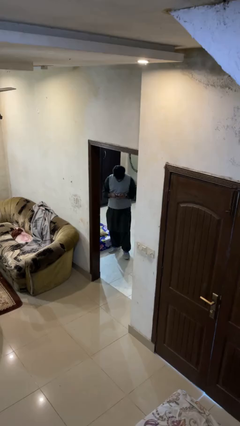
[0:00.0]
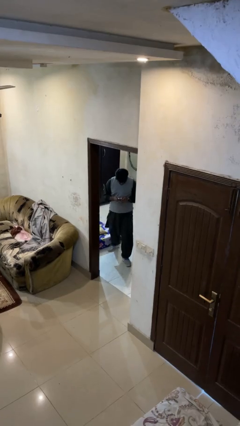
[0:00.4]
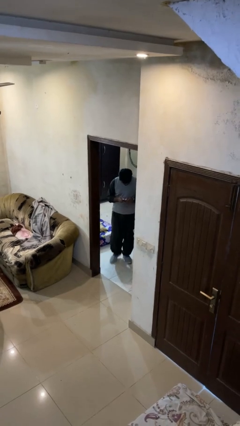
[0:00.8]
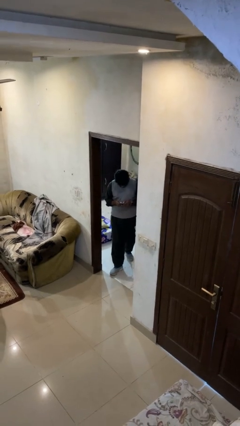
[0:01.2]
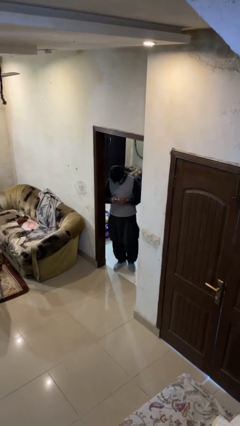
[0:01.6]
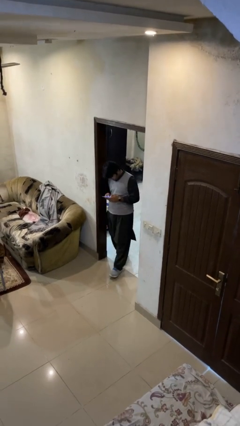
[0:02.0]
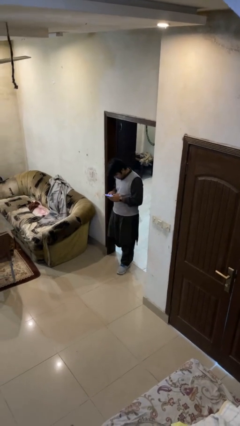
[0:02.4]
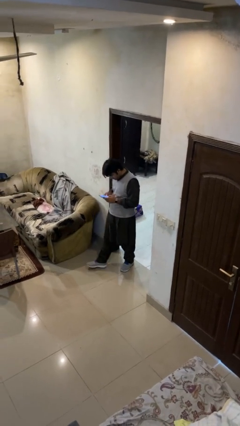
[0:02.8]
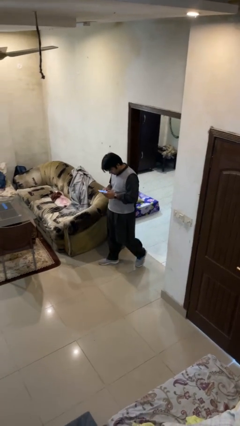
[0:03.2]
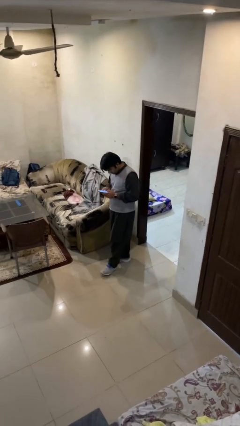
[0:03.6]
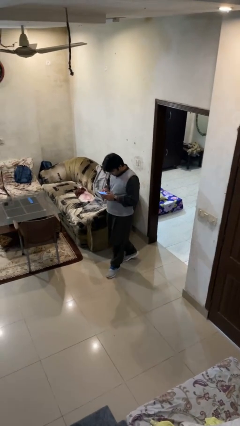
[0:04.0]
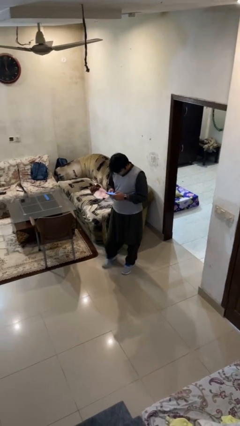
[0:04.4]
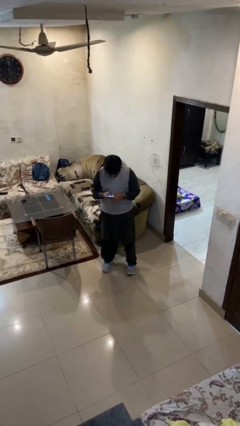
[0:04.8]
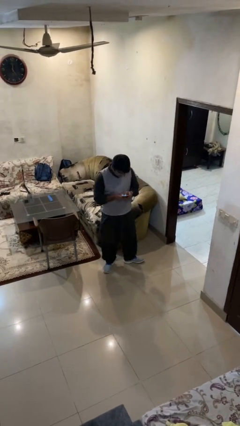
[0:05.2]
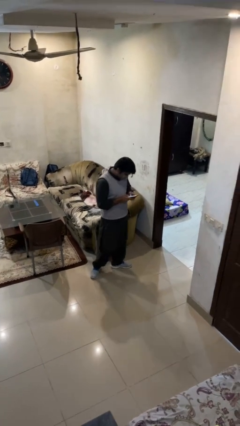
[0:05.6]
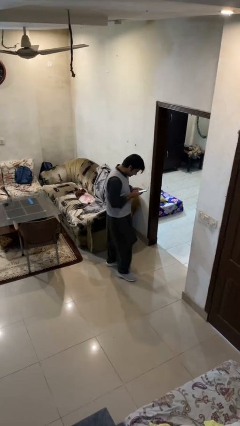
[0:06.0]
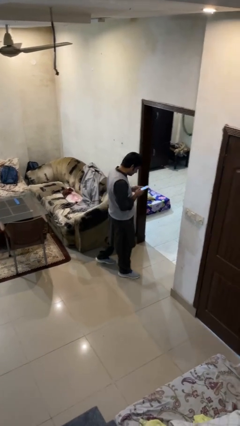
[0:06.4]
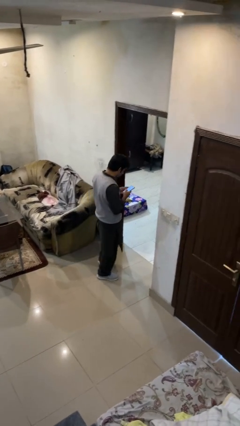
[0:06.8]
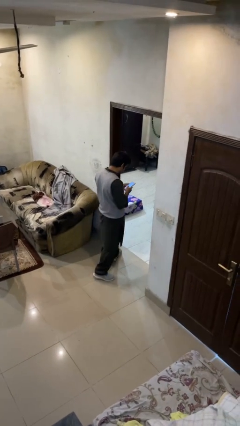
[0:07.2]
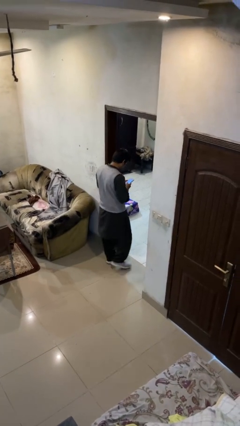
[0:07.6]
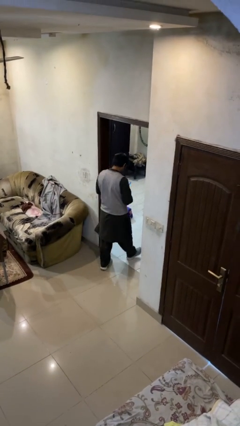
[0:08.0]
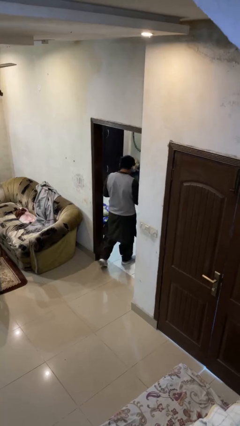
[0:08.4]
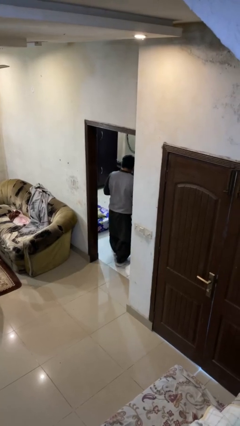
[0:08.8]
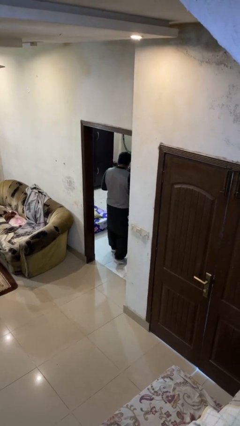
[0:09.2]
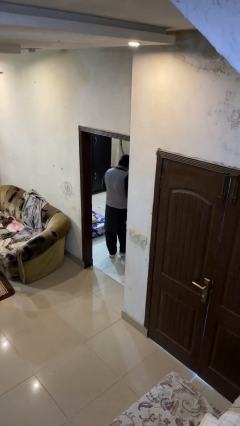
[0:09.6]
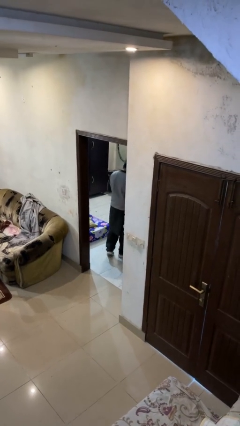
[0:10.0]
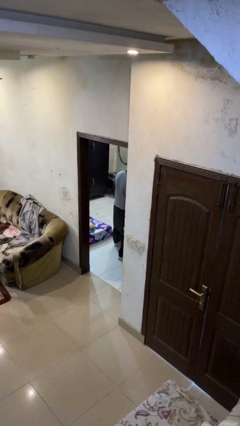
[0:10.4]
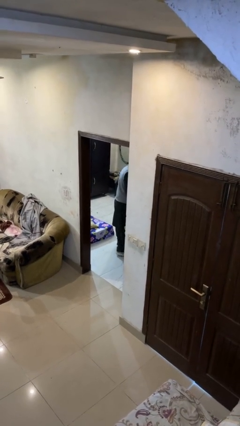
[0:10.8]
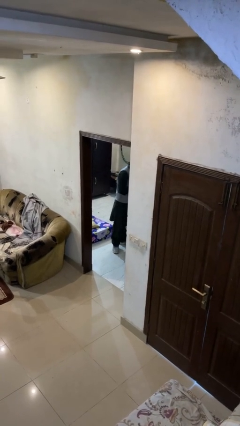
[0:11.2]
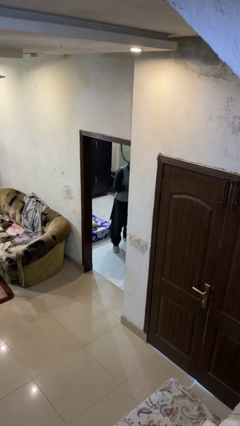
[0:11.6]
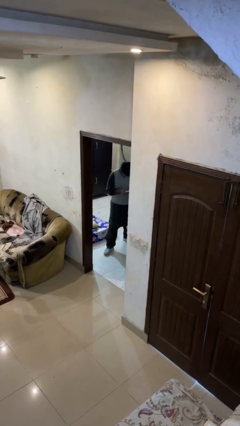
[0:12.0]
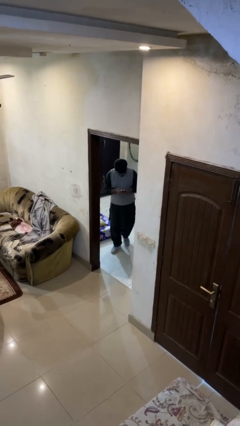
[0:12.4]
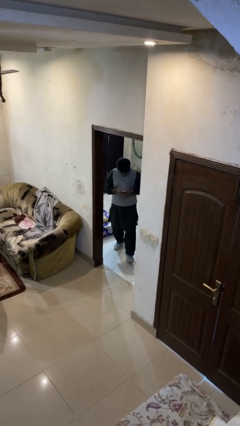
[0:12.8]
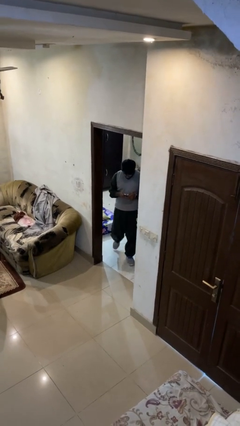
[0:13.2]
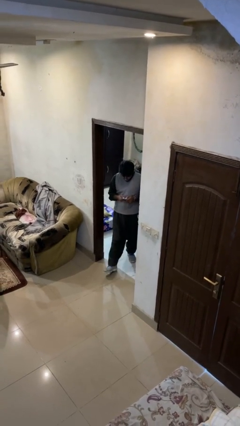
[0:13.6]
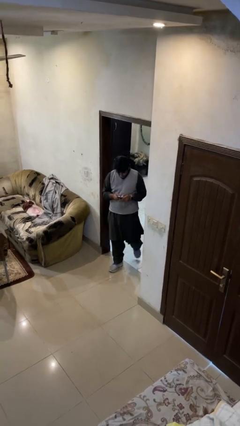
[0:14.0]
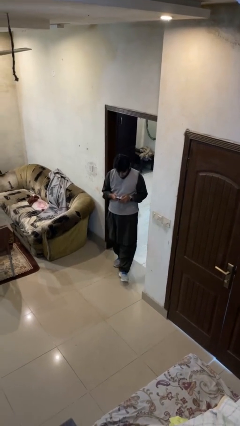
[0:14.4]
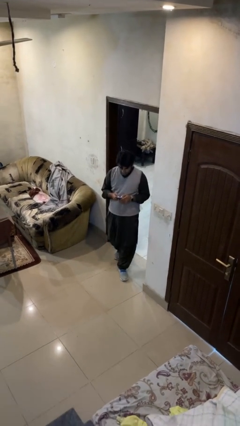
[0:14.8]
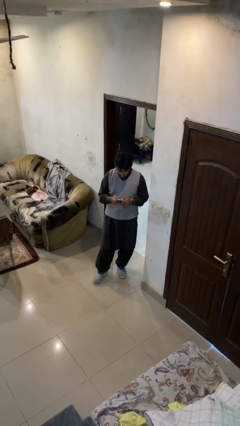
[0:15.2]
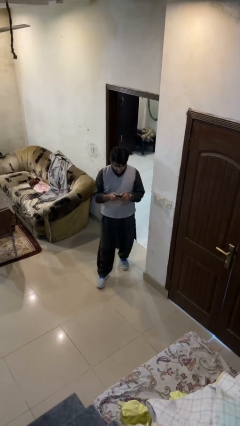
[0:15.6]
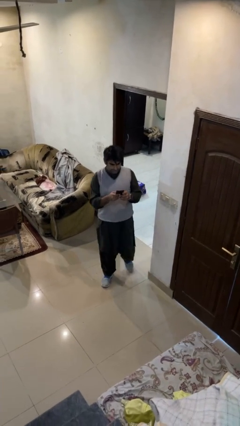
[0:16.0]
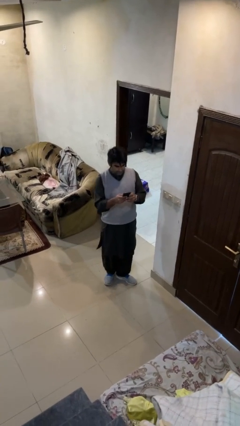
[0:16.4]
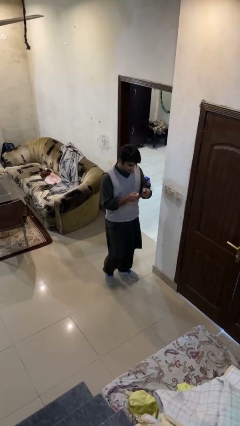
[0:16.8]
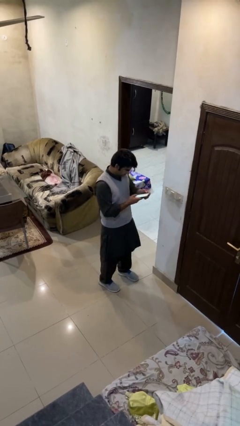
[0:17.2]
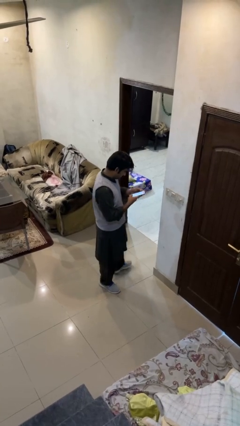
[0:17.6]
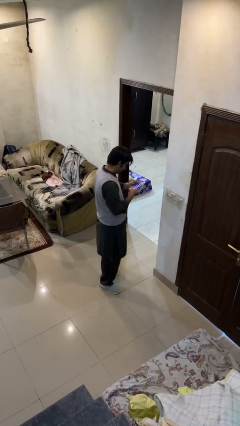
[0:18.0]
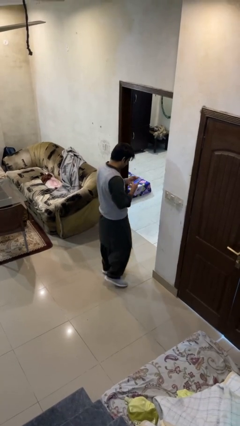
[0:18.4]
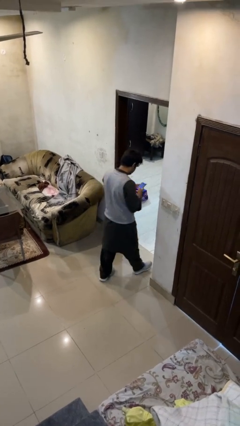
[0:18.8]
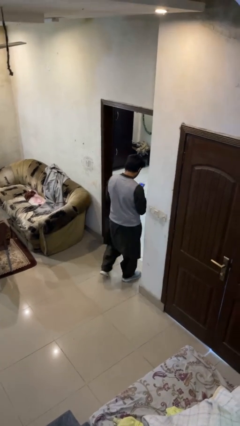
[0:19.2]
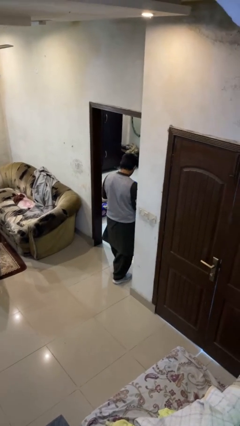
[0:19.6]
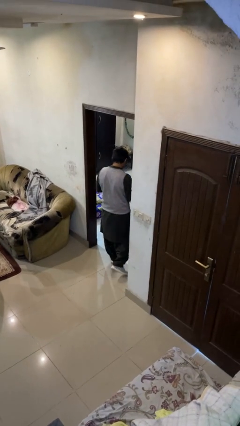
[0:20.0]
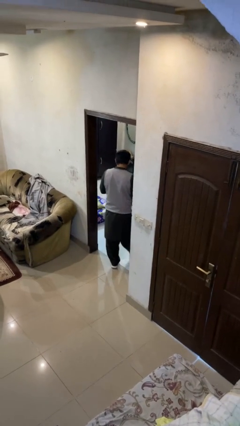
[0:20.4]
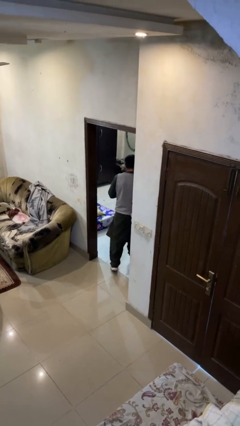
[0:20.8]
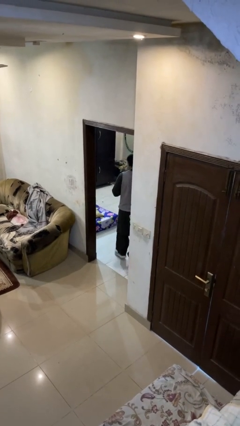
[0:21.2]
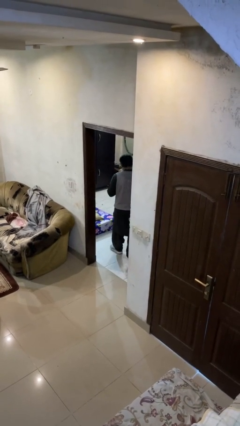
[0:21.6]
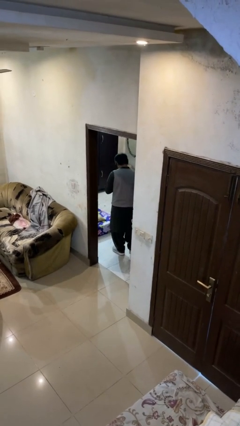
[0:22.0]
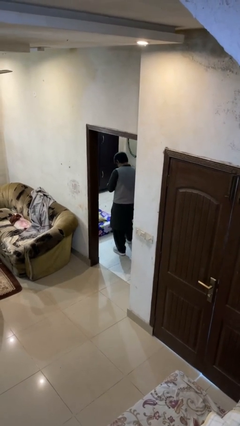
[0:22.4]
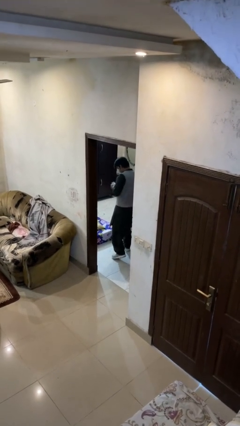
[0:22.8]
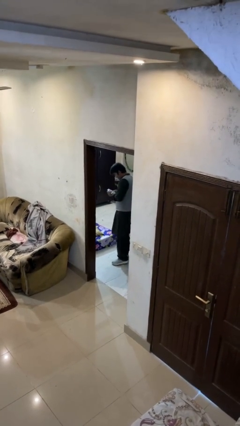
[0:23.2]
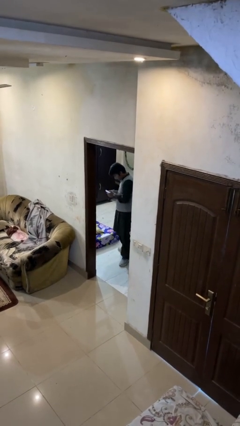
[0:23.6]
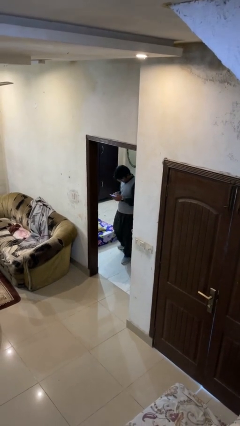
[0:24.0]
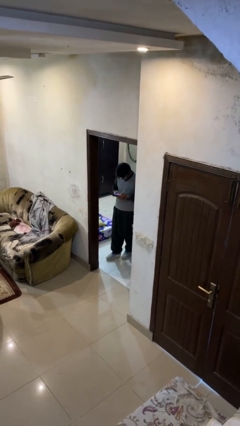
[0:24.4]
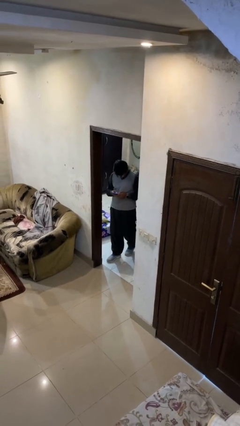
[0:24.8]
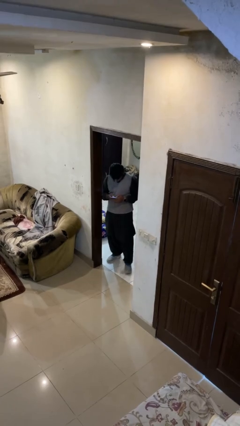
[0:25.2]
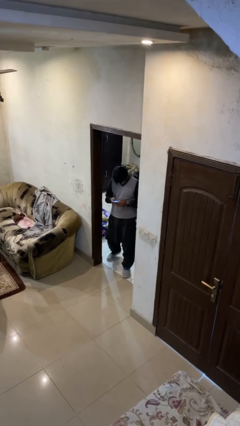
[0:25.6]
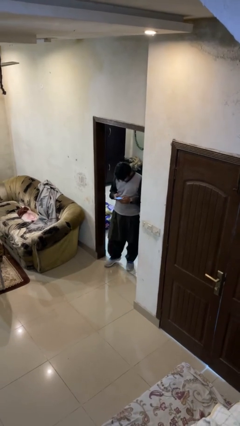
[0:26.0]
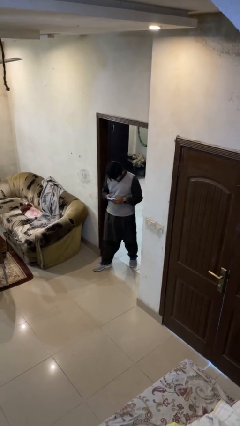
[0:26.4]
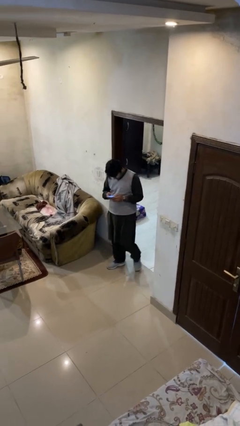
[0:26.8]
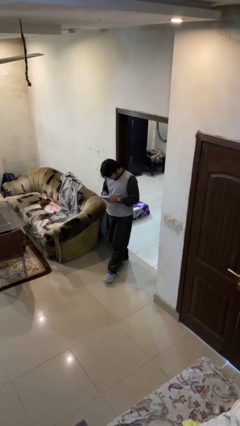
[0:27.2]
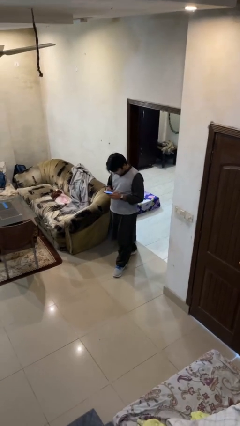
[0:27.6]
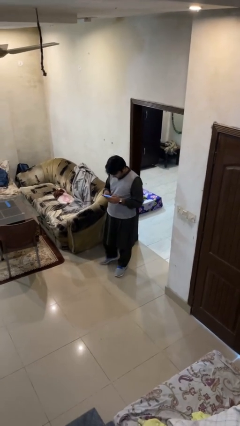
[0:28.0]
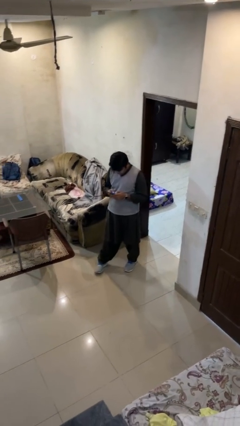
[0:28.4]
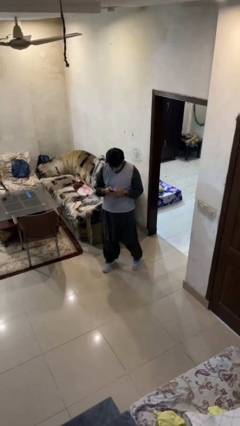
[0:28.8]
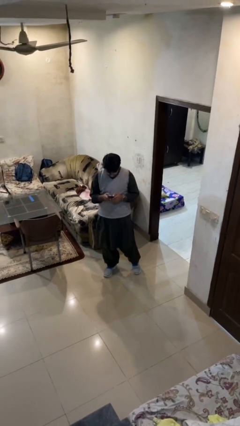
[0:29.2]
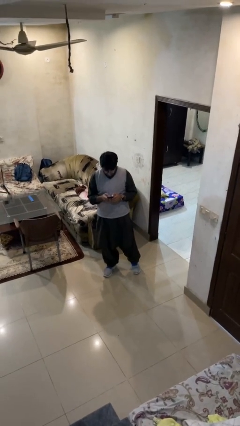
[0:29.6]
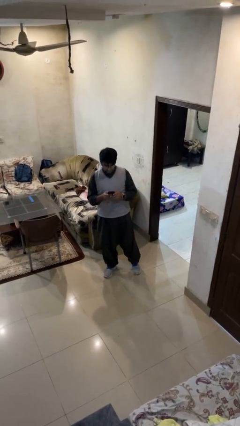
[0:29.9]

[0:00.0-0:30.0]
person texts on phone

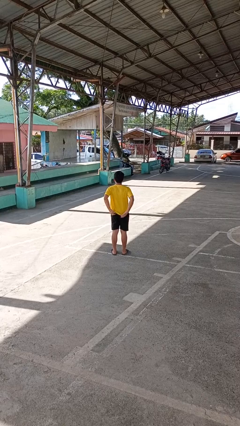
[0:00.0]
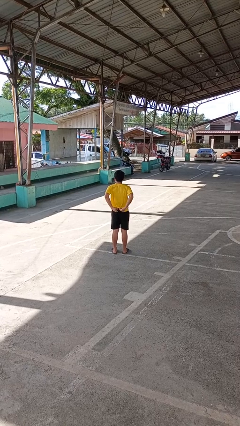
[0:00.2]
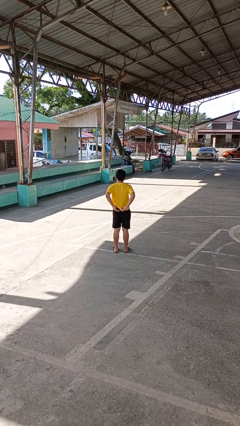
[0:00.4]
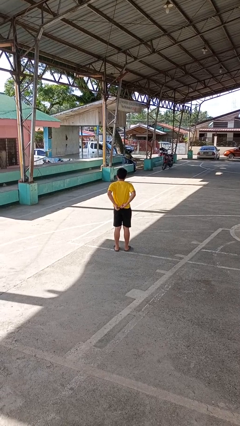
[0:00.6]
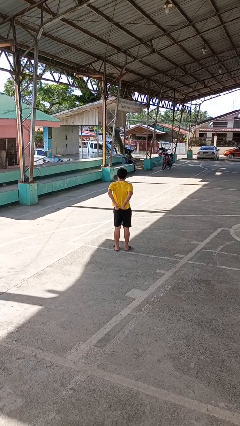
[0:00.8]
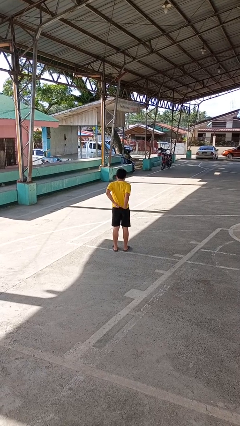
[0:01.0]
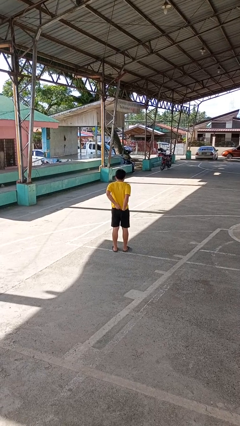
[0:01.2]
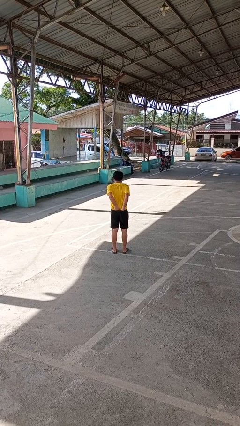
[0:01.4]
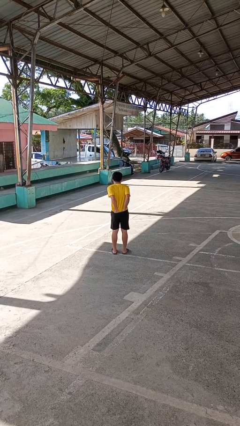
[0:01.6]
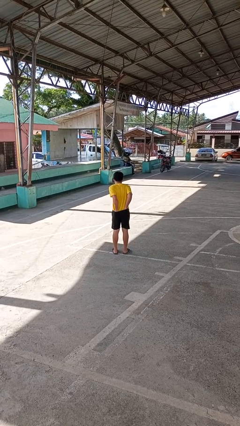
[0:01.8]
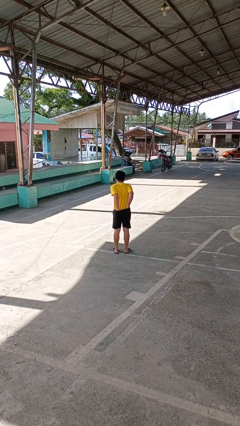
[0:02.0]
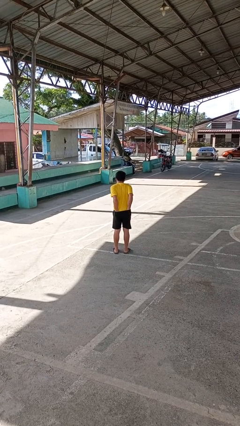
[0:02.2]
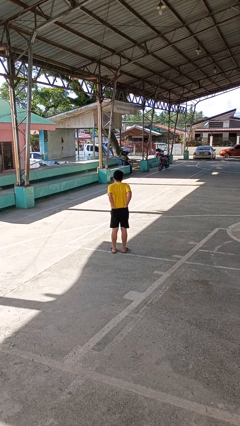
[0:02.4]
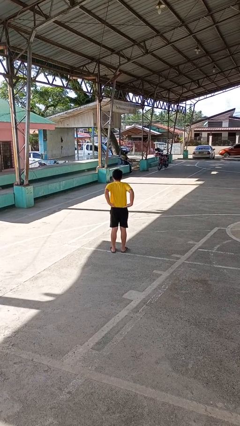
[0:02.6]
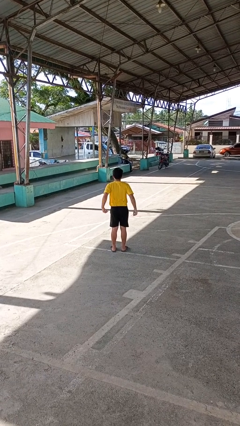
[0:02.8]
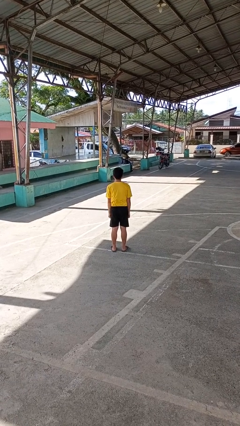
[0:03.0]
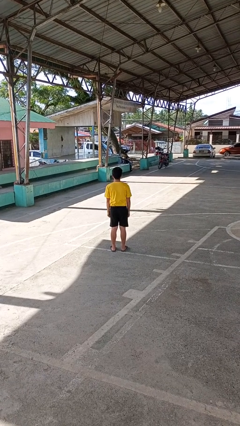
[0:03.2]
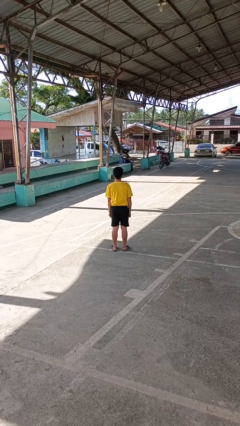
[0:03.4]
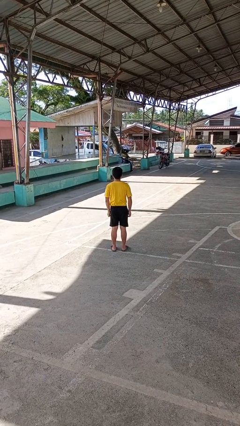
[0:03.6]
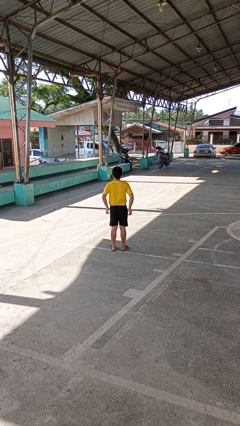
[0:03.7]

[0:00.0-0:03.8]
person tucks in shirt
